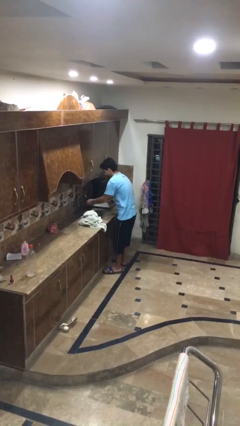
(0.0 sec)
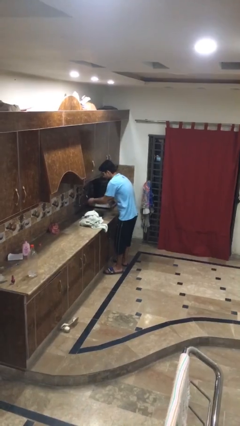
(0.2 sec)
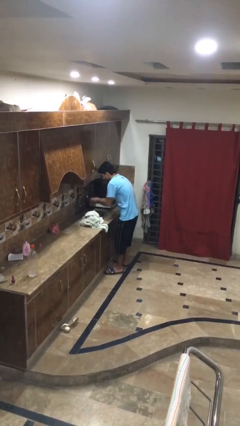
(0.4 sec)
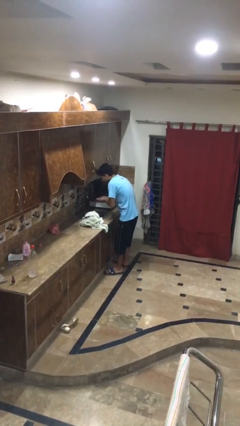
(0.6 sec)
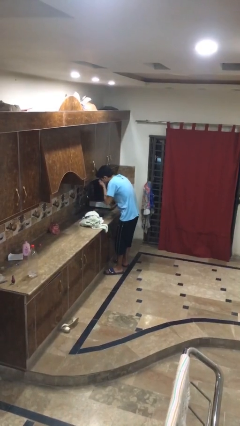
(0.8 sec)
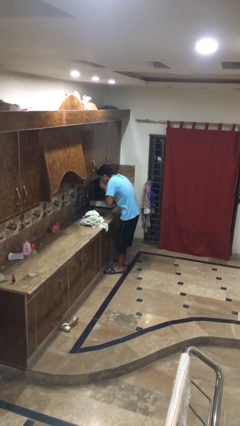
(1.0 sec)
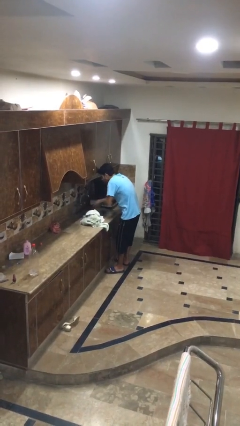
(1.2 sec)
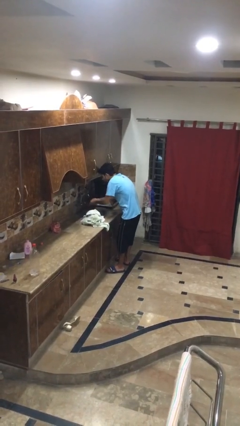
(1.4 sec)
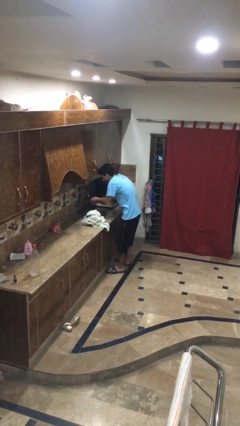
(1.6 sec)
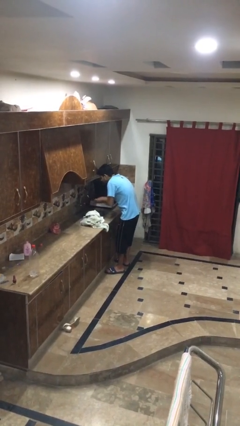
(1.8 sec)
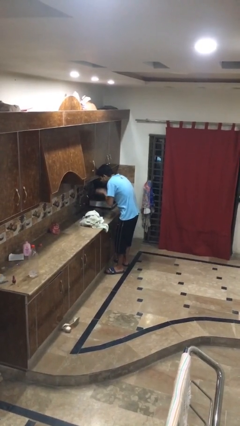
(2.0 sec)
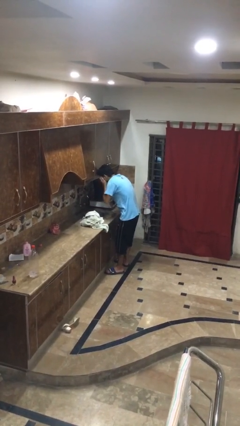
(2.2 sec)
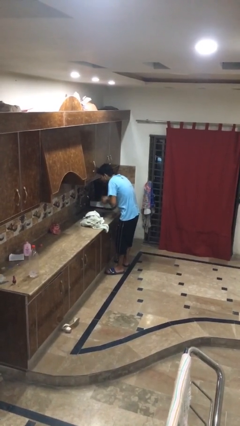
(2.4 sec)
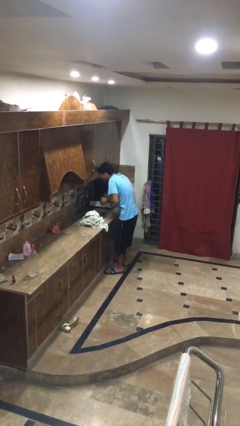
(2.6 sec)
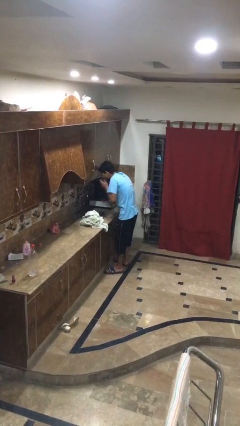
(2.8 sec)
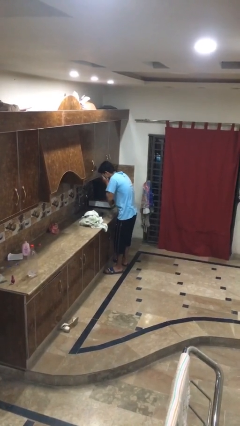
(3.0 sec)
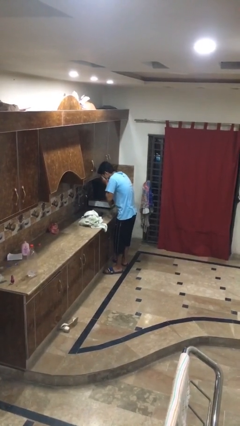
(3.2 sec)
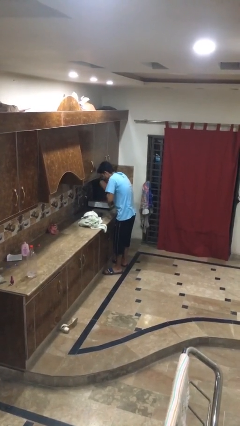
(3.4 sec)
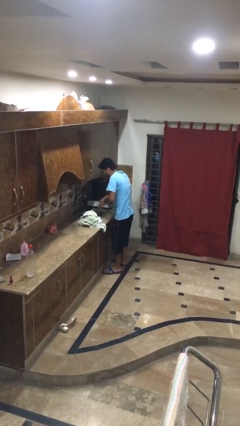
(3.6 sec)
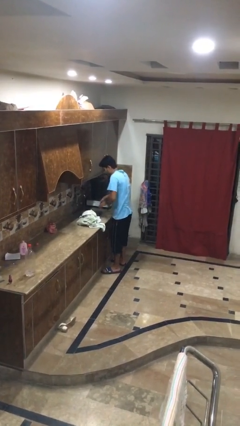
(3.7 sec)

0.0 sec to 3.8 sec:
person washes face

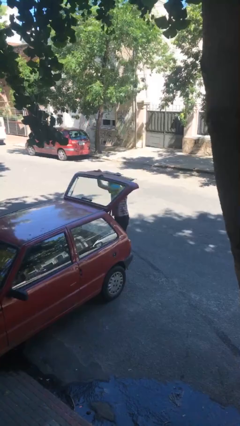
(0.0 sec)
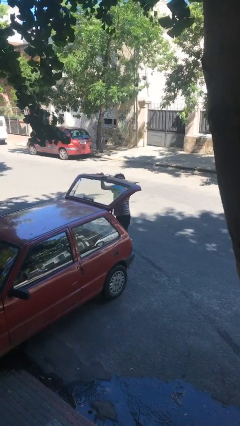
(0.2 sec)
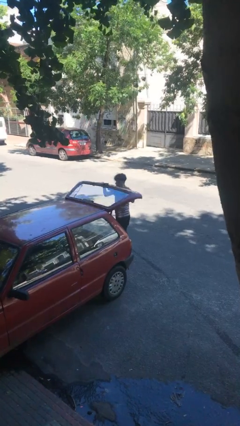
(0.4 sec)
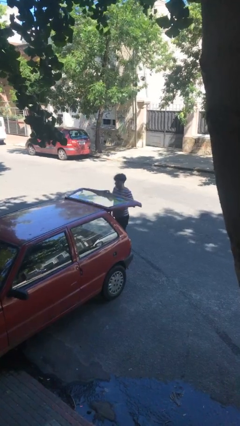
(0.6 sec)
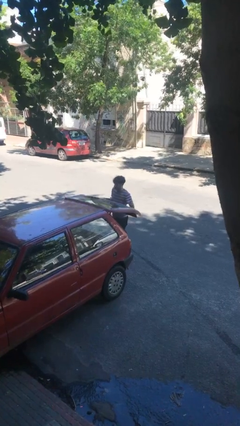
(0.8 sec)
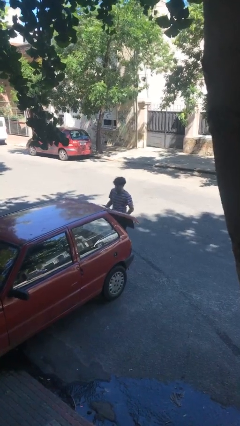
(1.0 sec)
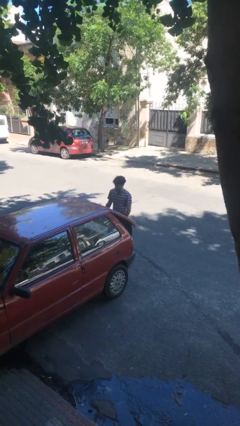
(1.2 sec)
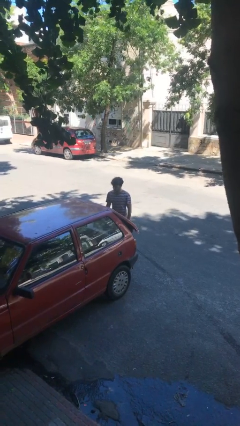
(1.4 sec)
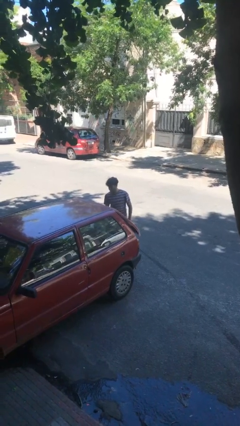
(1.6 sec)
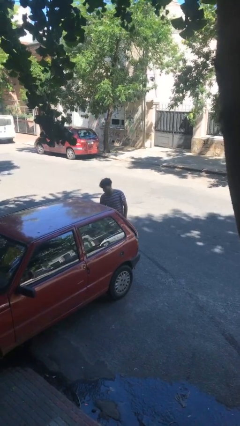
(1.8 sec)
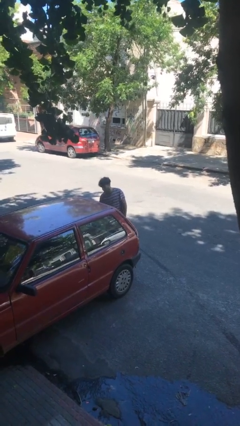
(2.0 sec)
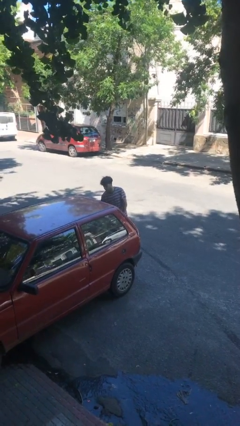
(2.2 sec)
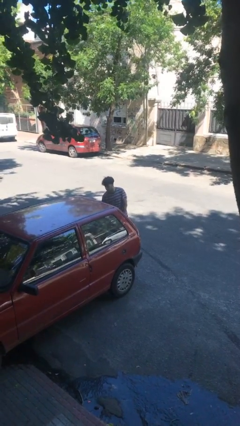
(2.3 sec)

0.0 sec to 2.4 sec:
person closes car trunk

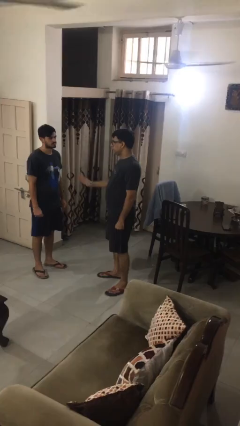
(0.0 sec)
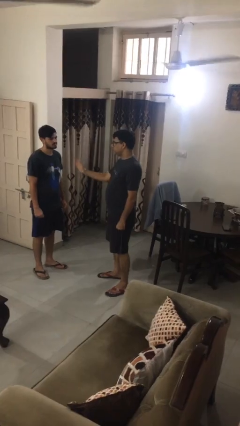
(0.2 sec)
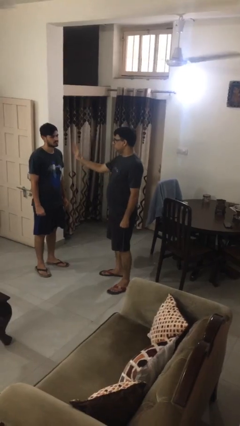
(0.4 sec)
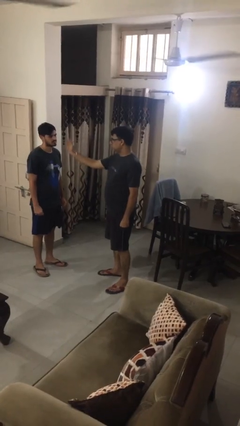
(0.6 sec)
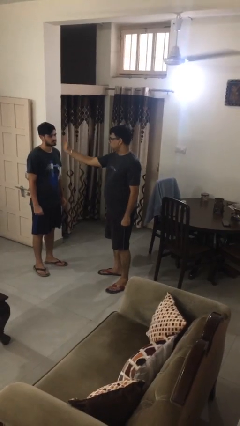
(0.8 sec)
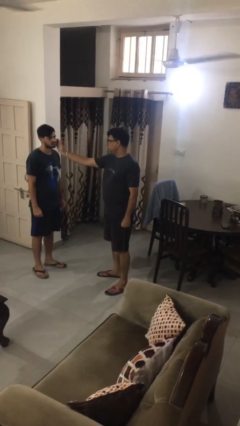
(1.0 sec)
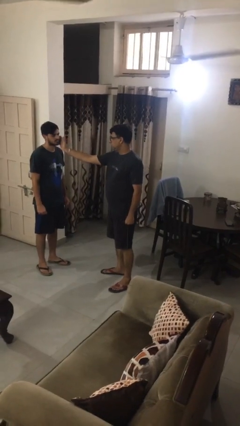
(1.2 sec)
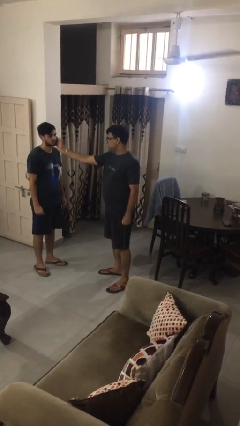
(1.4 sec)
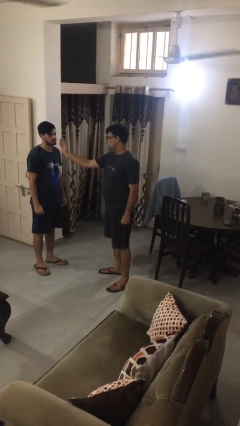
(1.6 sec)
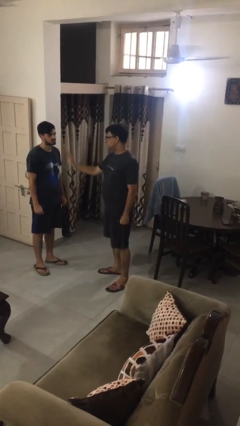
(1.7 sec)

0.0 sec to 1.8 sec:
person touches face of person

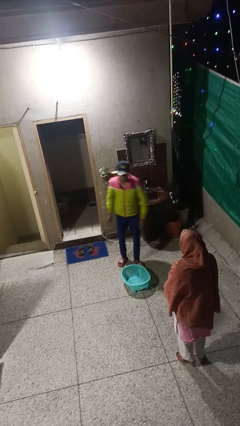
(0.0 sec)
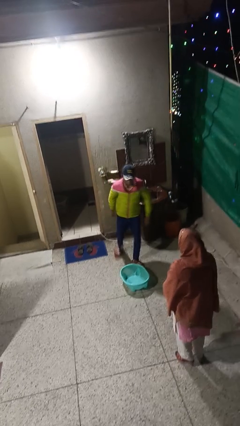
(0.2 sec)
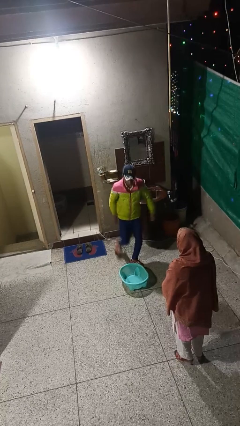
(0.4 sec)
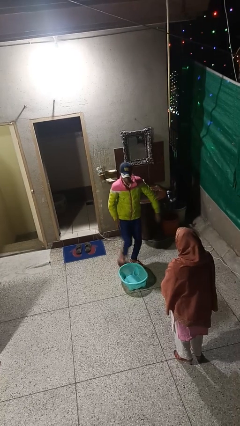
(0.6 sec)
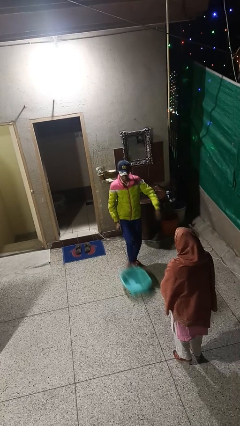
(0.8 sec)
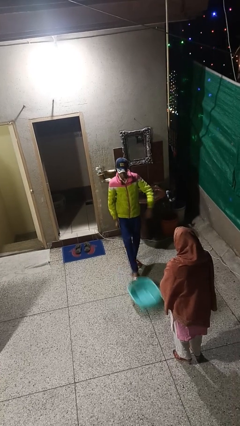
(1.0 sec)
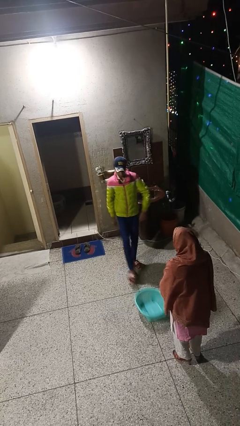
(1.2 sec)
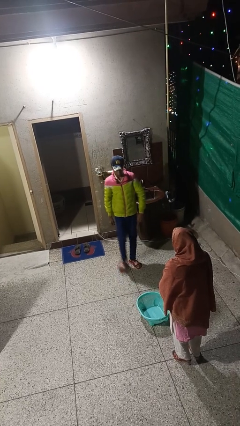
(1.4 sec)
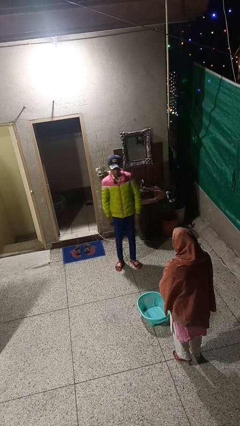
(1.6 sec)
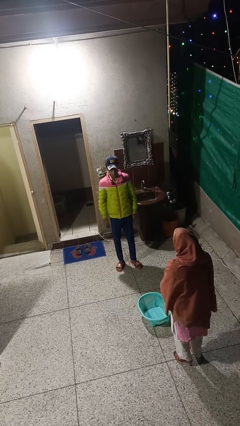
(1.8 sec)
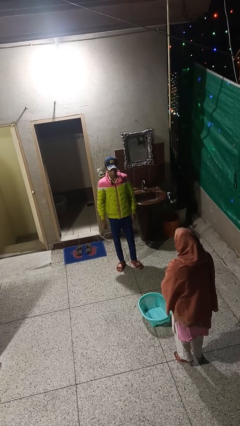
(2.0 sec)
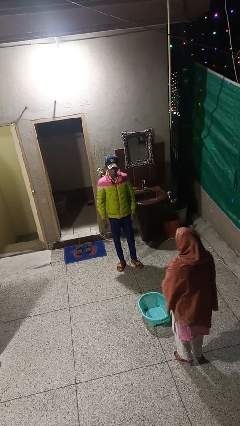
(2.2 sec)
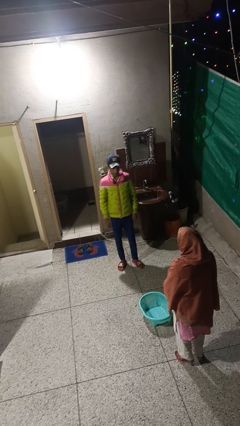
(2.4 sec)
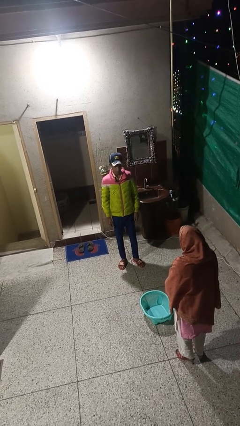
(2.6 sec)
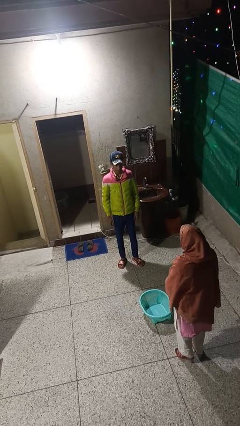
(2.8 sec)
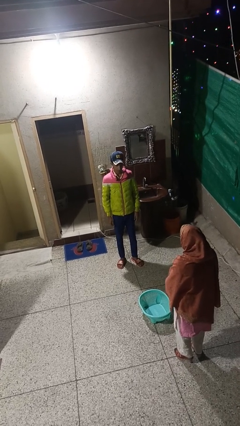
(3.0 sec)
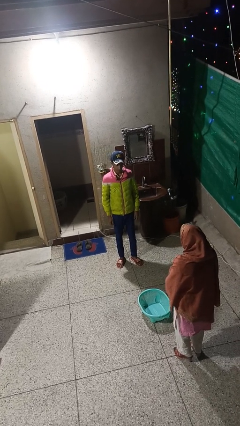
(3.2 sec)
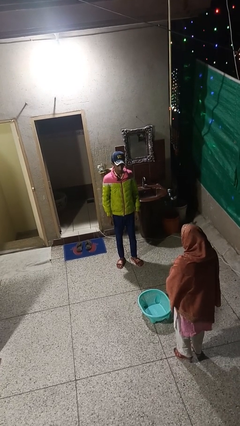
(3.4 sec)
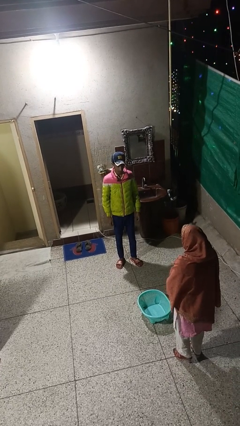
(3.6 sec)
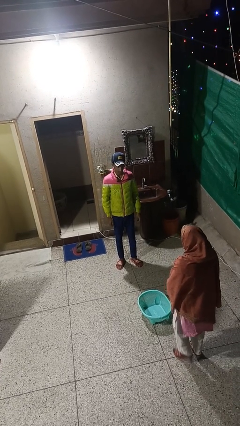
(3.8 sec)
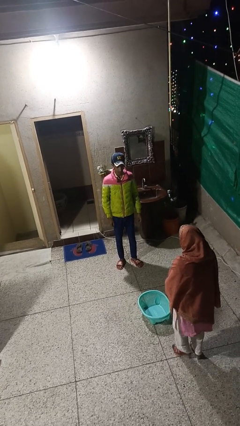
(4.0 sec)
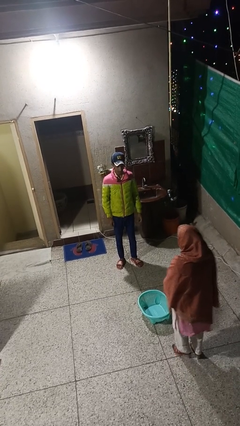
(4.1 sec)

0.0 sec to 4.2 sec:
person kicks object to person

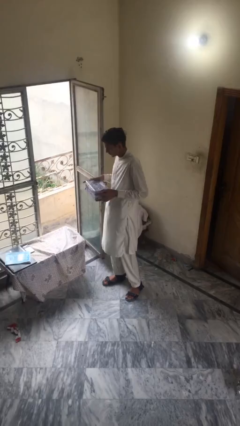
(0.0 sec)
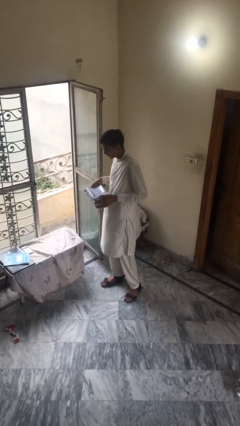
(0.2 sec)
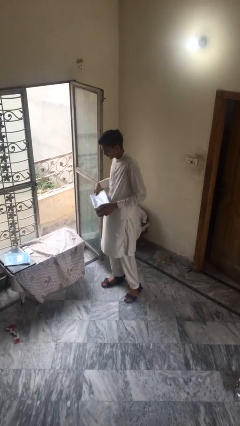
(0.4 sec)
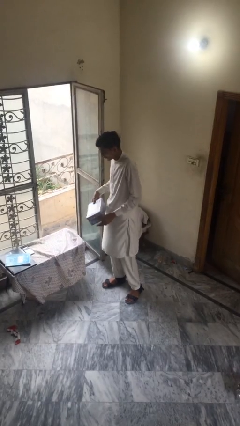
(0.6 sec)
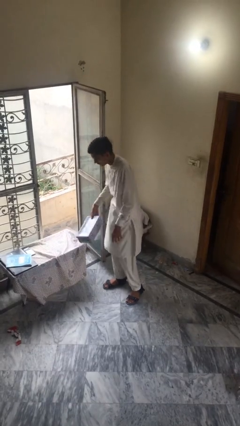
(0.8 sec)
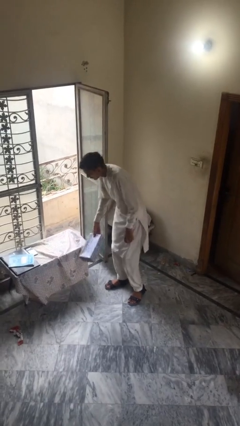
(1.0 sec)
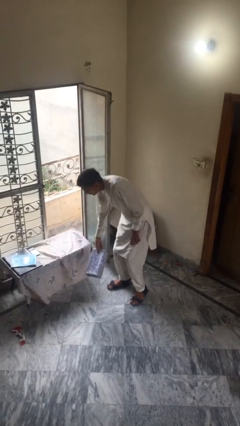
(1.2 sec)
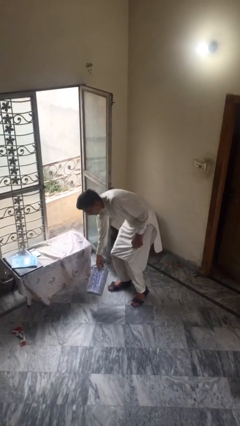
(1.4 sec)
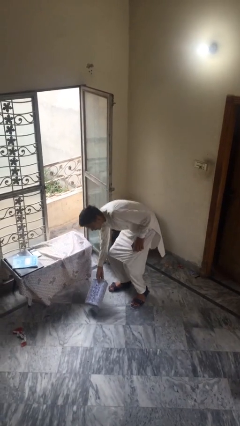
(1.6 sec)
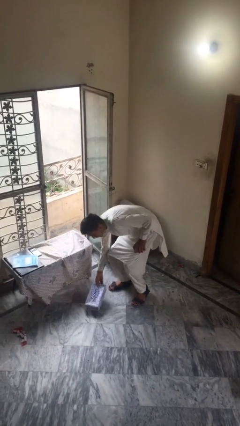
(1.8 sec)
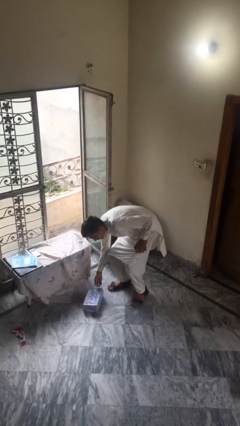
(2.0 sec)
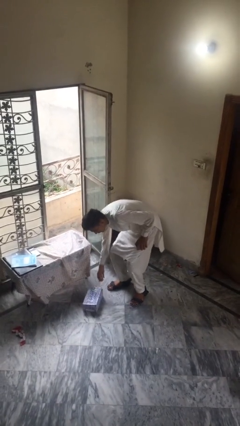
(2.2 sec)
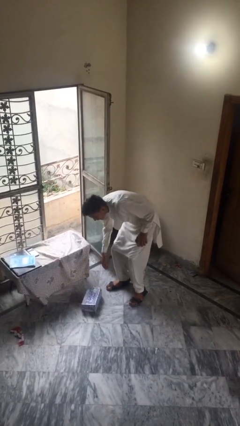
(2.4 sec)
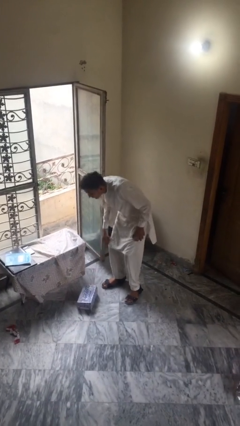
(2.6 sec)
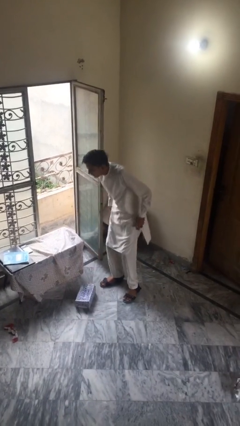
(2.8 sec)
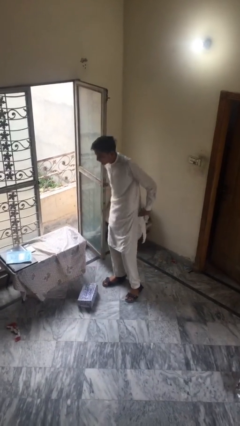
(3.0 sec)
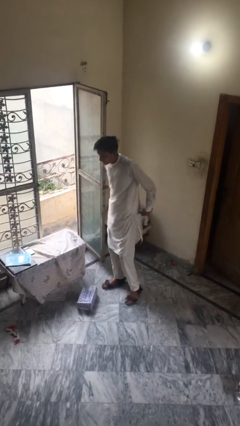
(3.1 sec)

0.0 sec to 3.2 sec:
person puts down object on floor

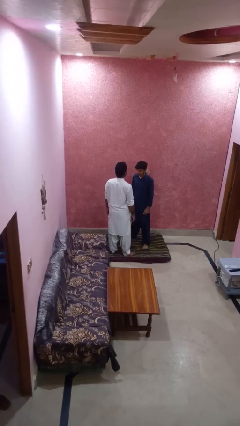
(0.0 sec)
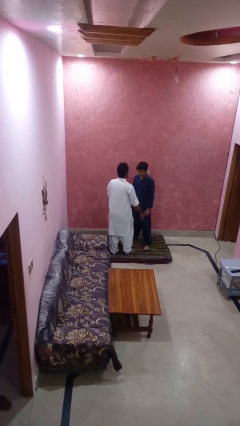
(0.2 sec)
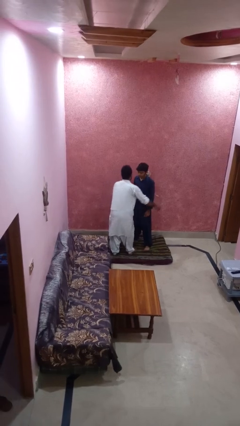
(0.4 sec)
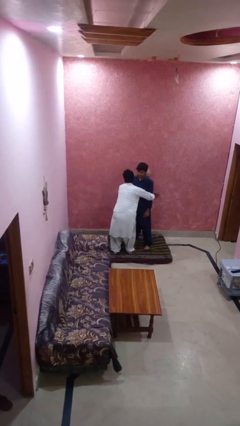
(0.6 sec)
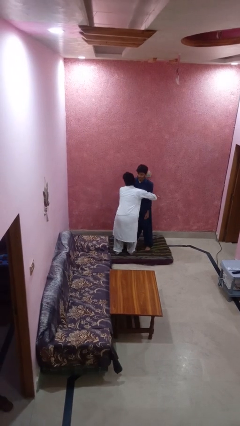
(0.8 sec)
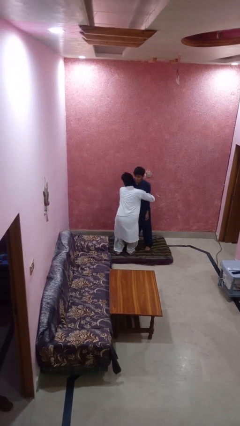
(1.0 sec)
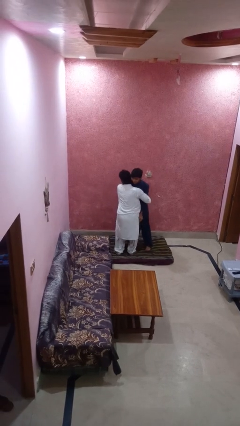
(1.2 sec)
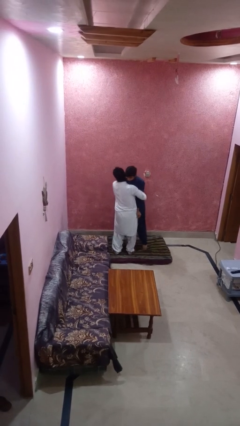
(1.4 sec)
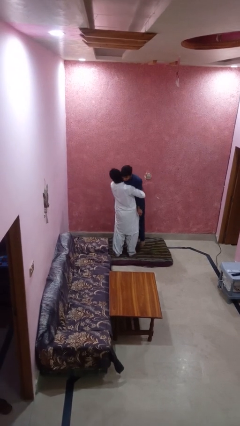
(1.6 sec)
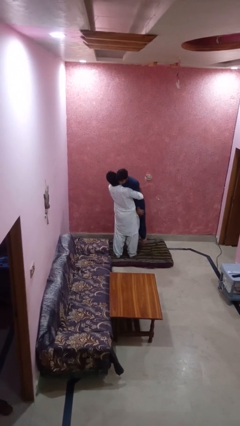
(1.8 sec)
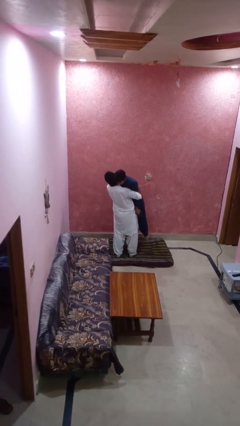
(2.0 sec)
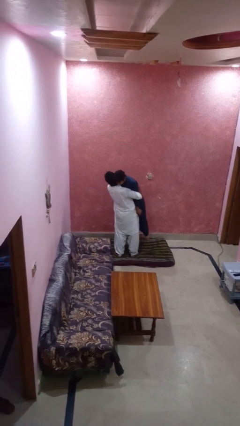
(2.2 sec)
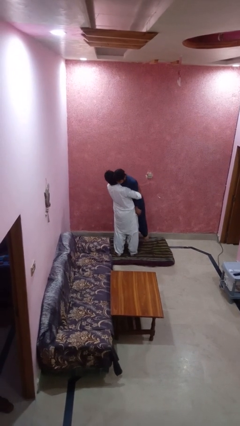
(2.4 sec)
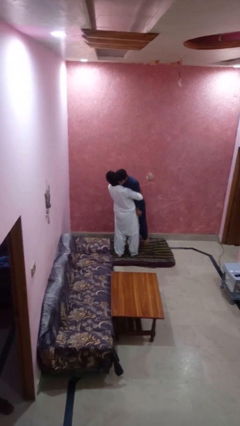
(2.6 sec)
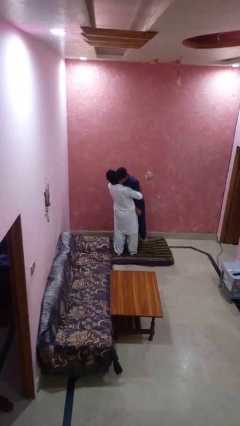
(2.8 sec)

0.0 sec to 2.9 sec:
person picks up person
